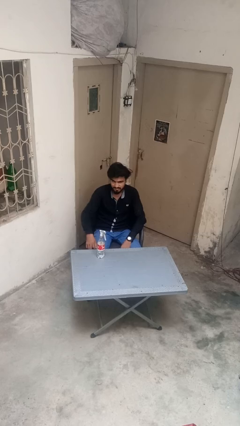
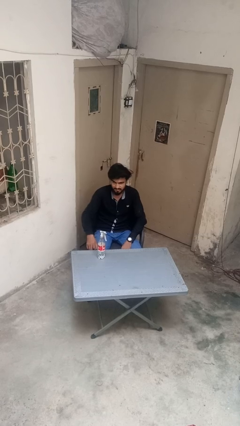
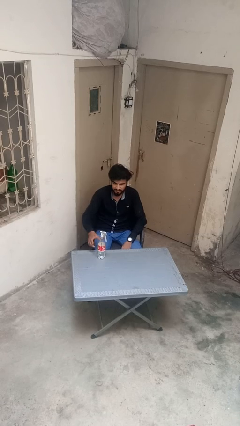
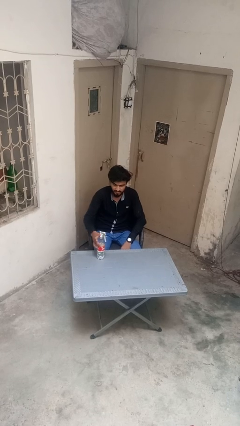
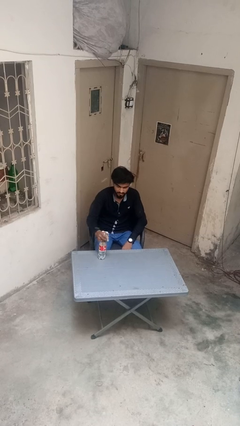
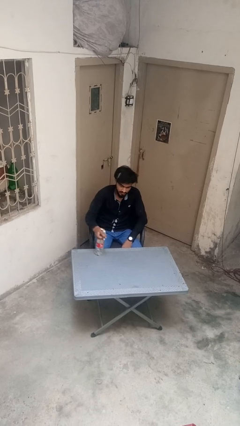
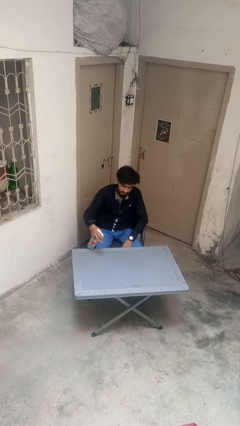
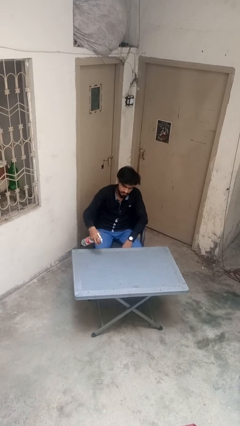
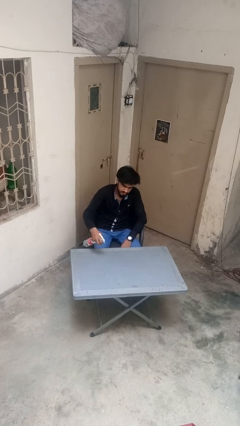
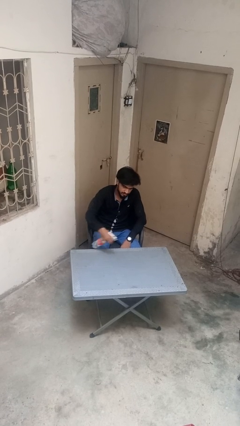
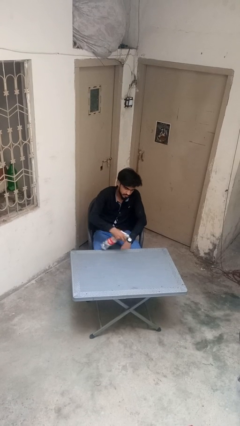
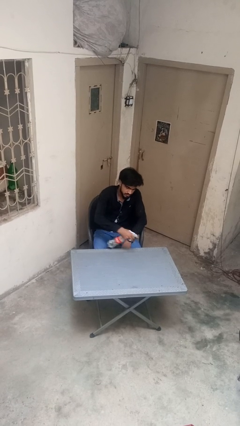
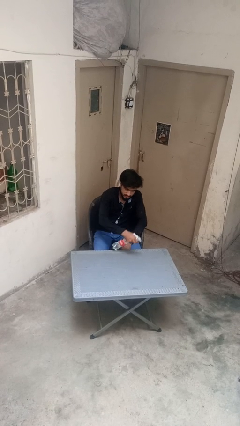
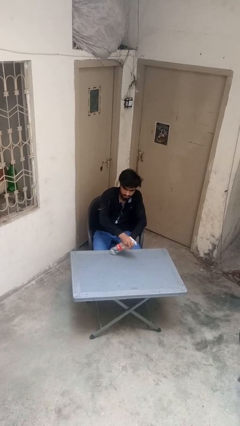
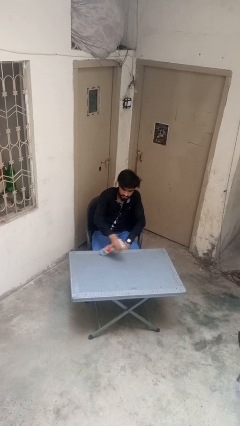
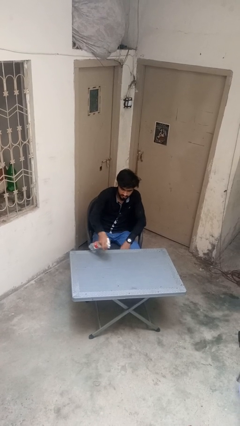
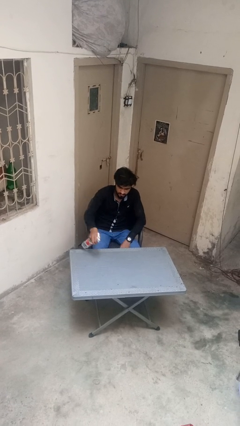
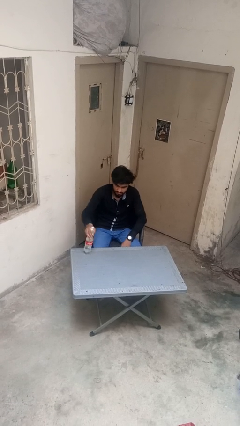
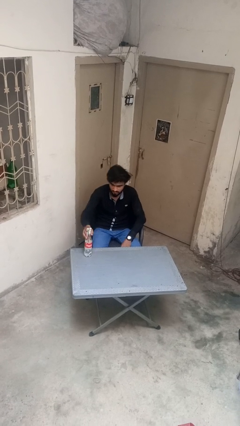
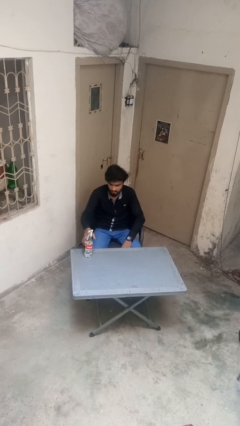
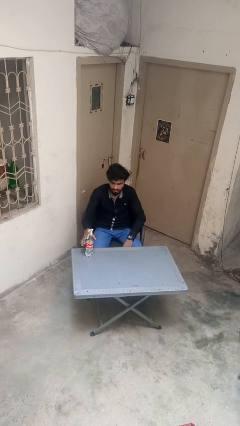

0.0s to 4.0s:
person sprays from bottle

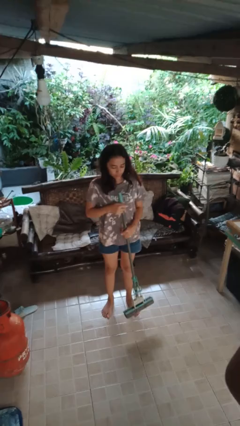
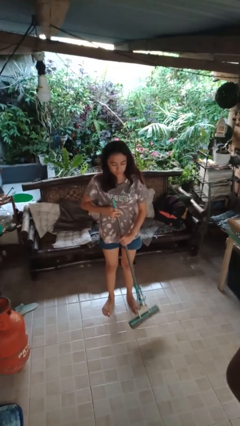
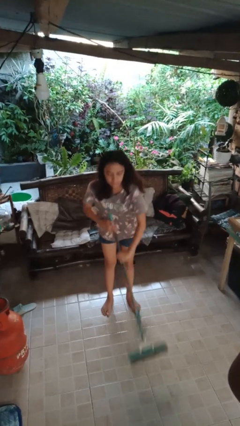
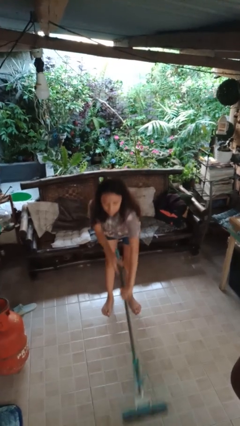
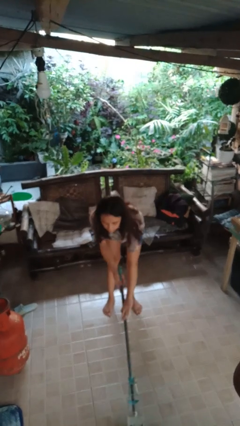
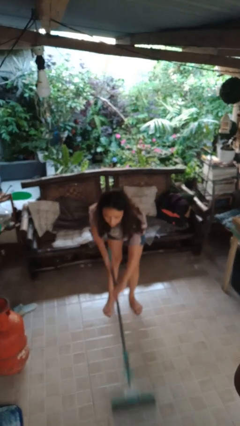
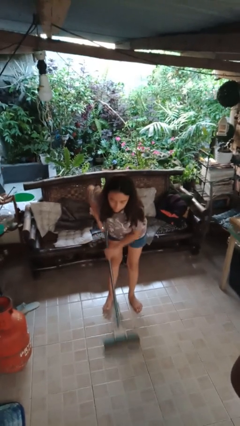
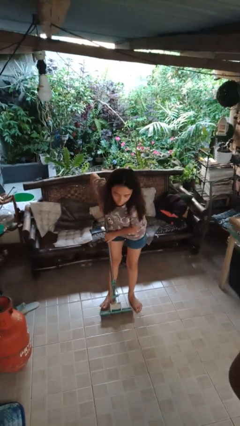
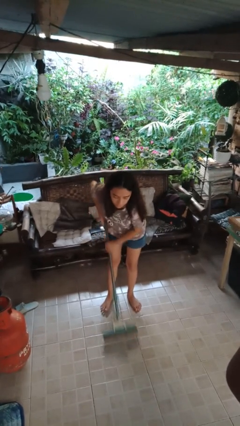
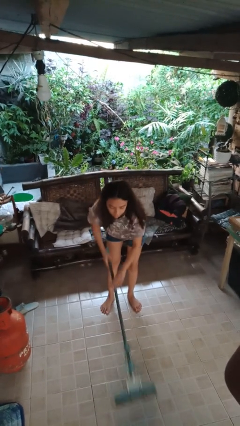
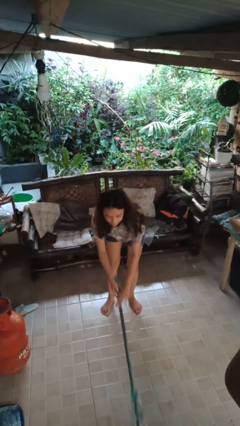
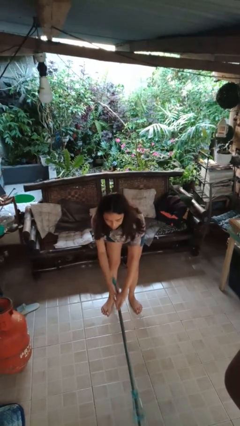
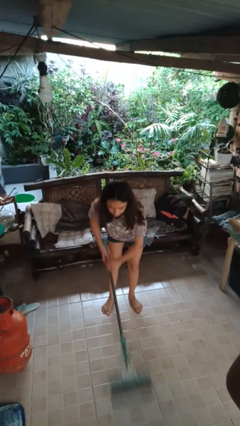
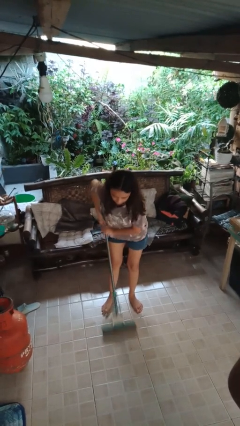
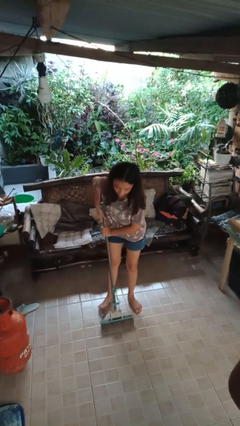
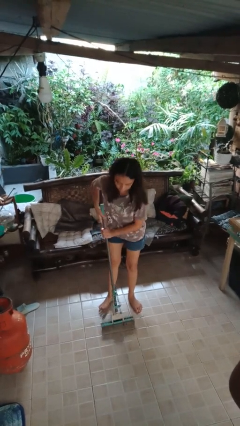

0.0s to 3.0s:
person mops

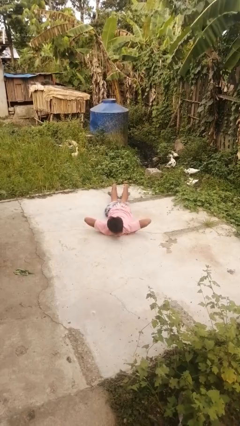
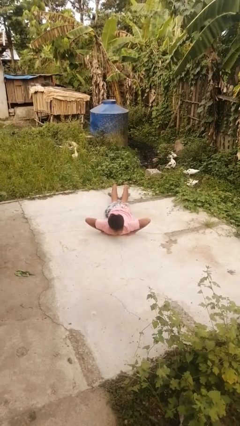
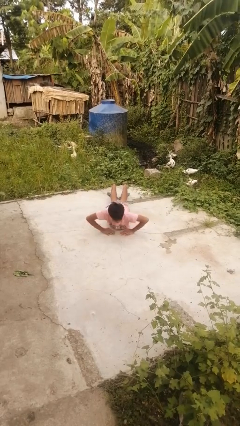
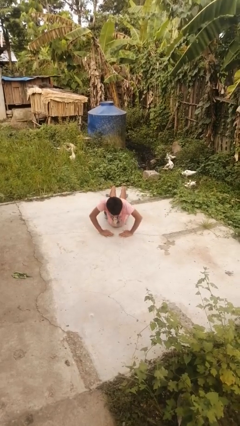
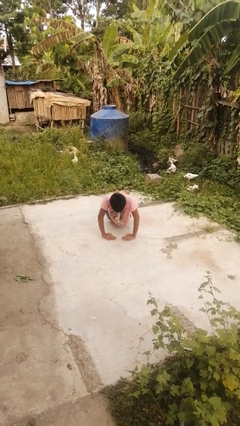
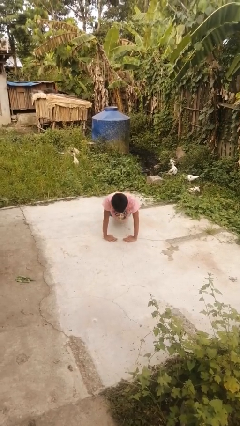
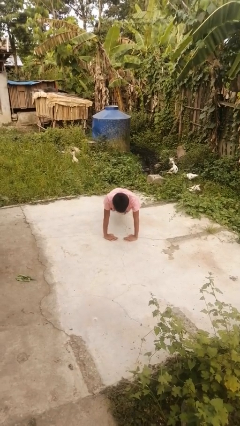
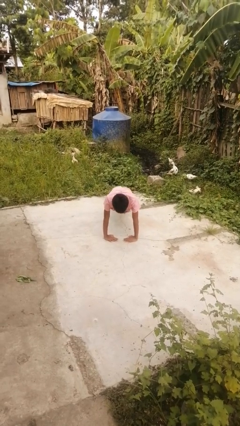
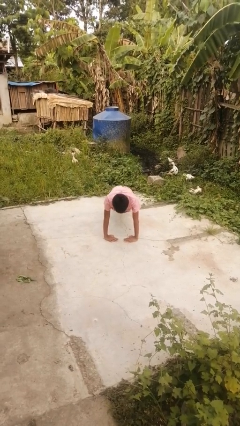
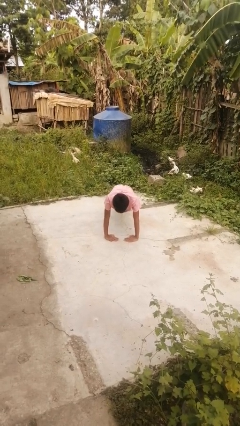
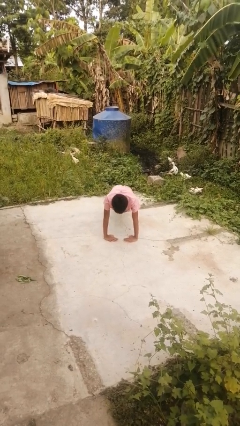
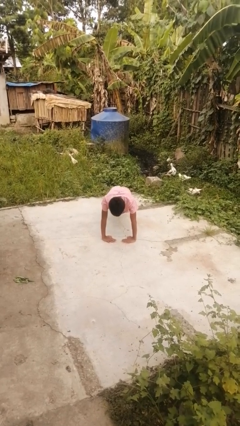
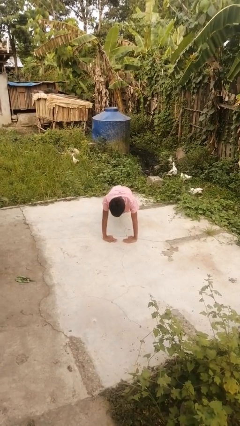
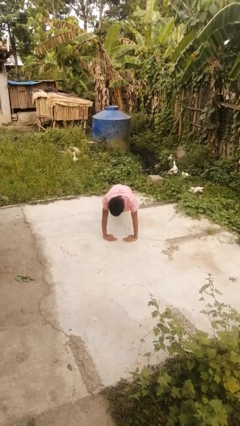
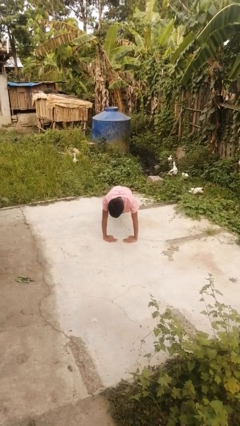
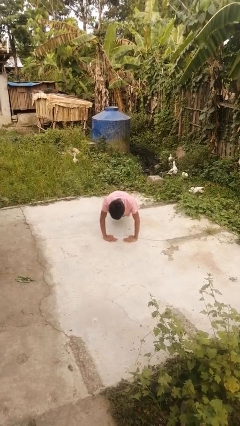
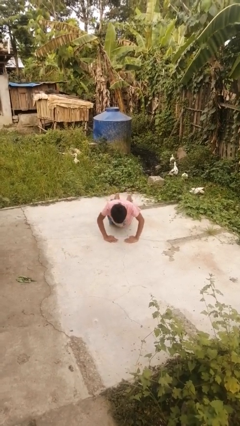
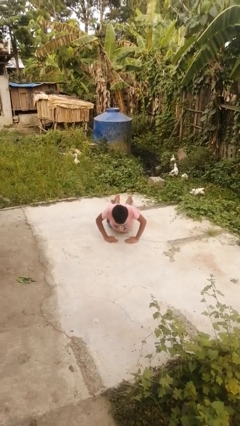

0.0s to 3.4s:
person exercises with pushup

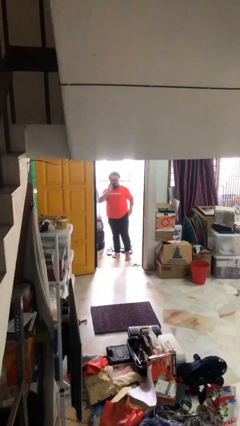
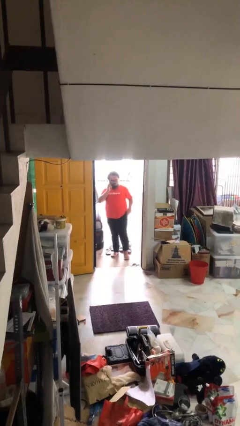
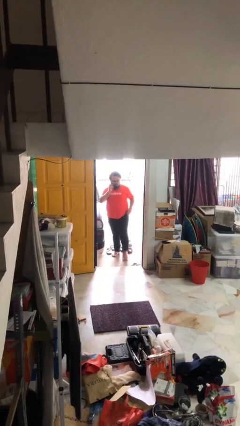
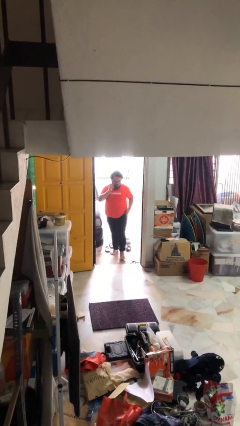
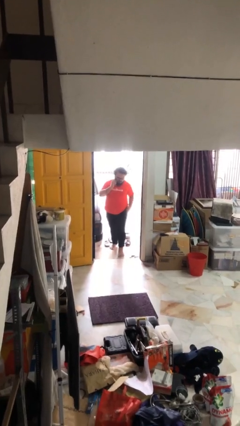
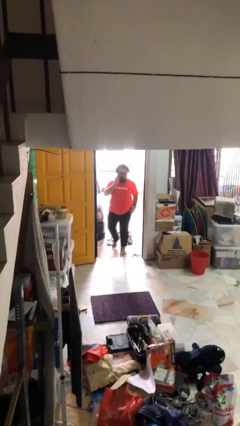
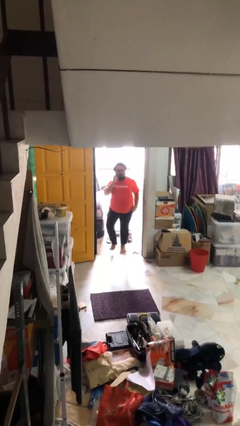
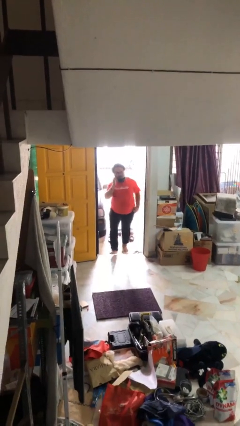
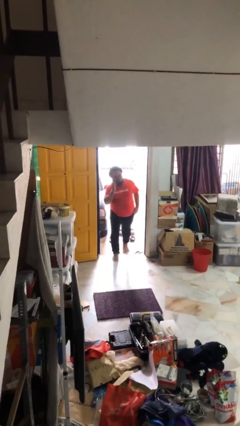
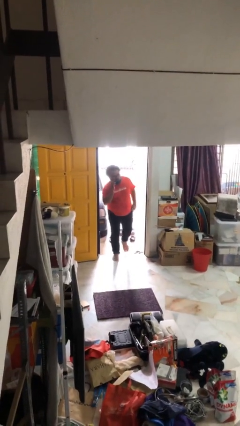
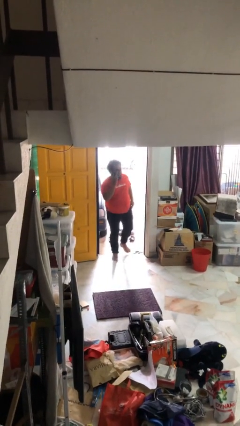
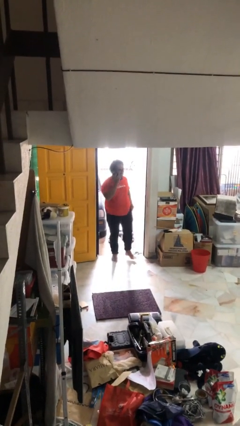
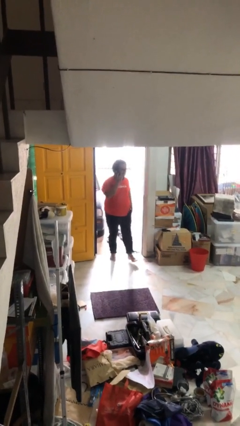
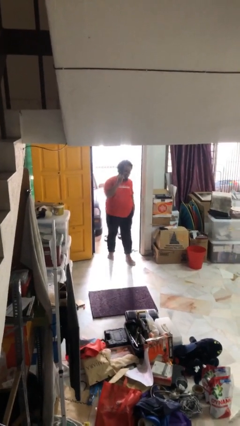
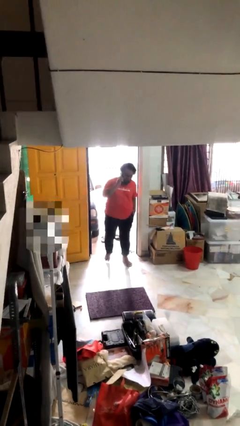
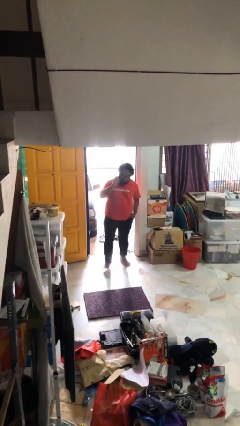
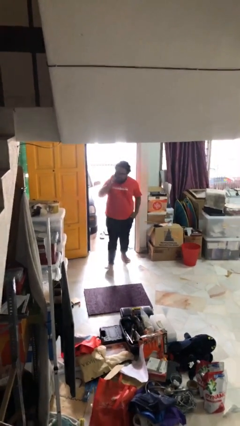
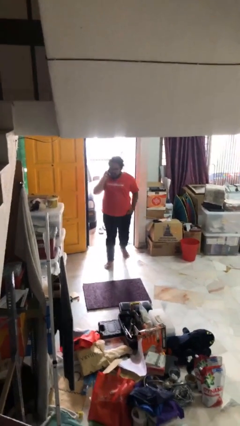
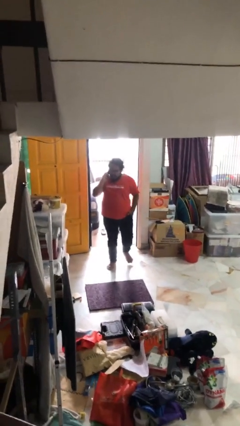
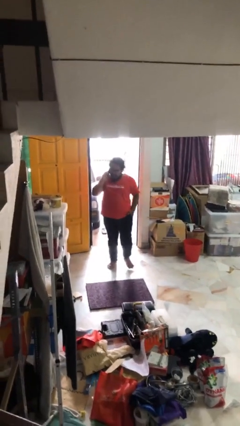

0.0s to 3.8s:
person enters scene through structure

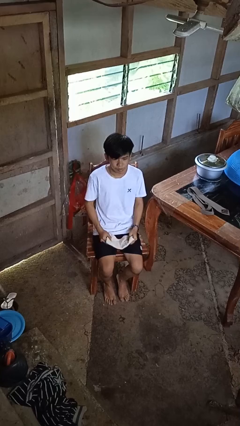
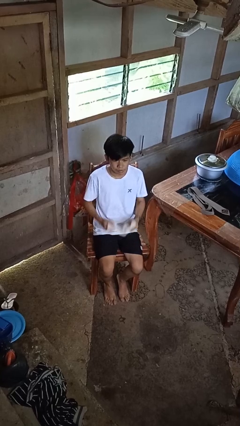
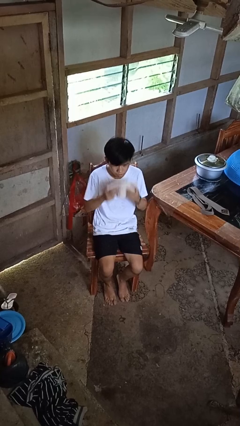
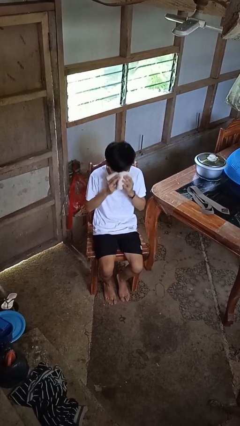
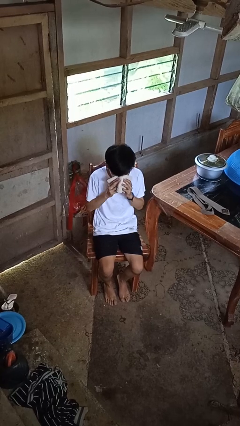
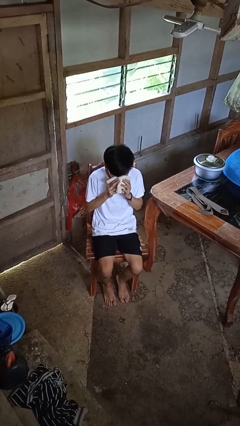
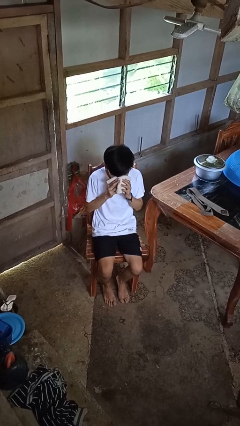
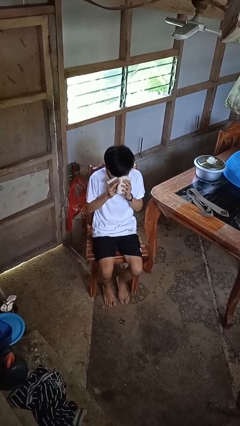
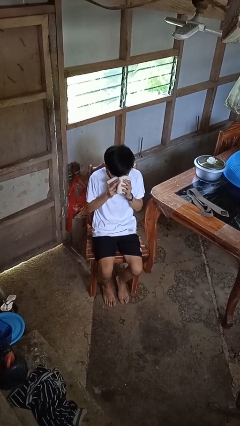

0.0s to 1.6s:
person blows nose

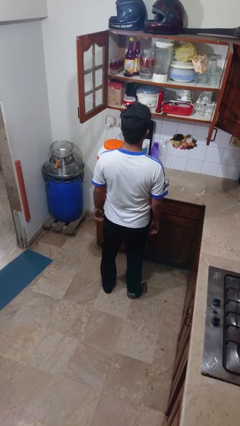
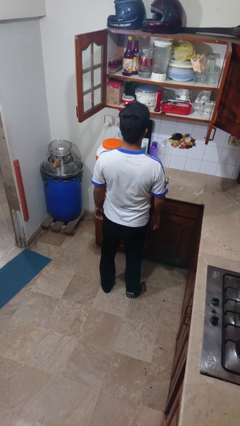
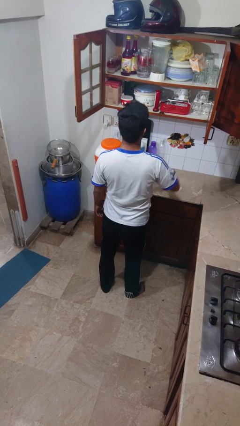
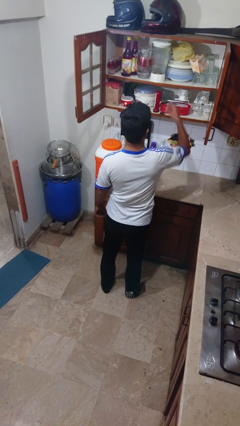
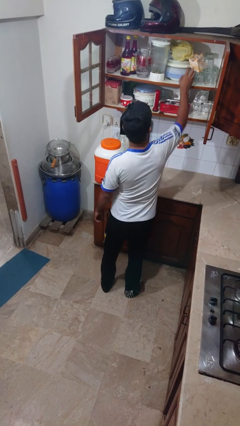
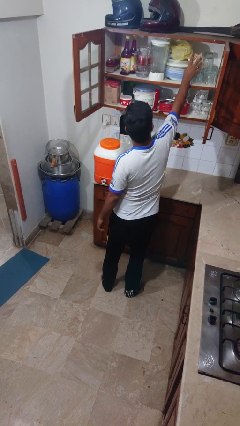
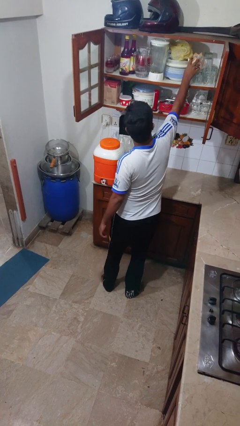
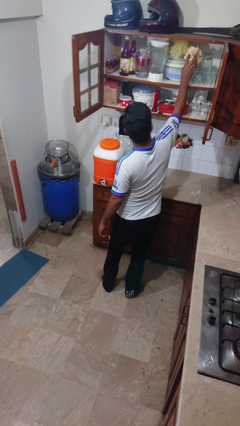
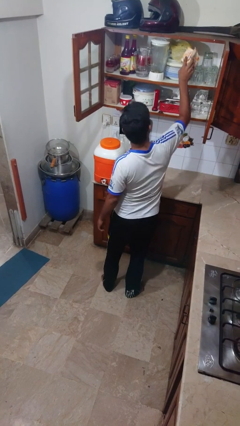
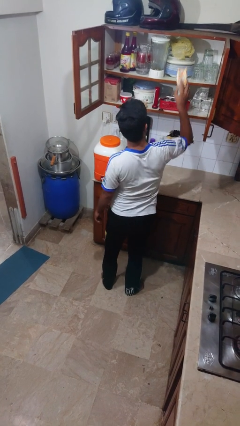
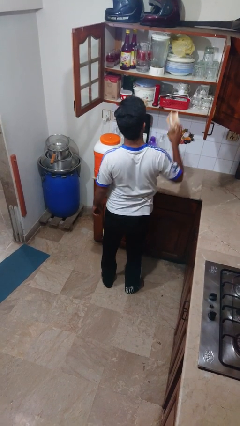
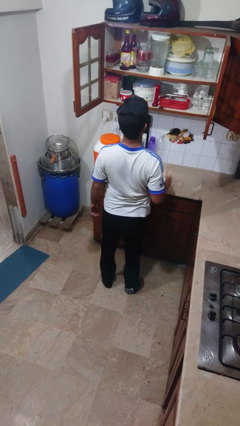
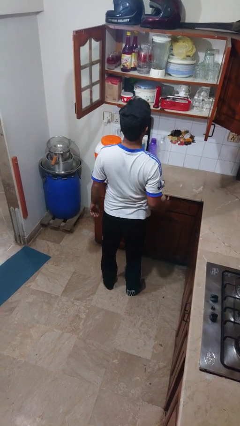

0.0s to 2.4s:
person picks up object from cabinet
